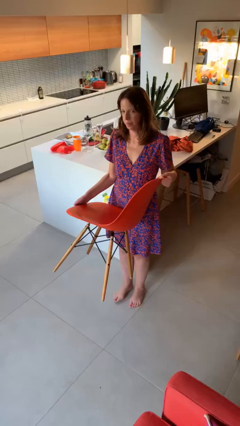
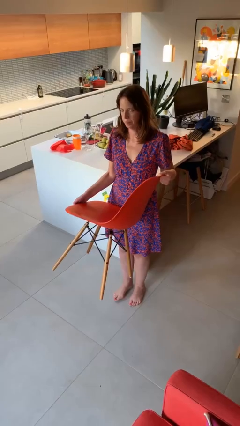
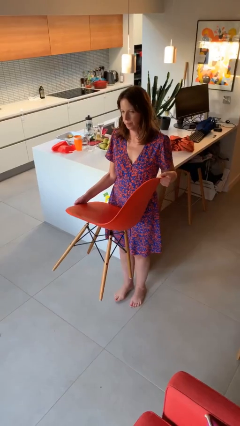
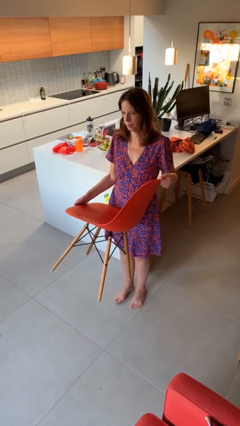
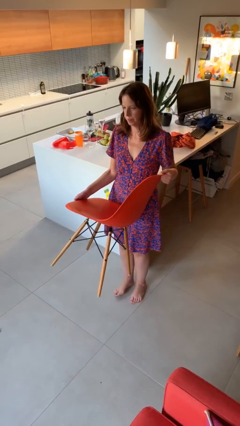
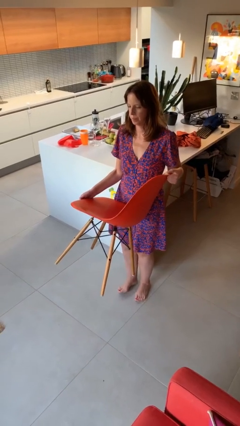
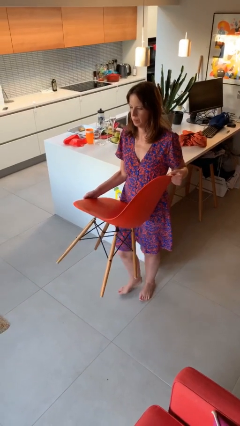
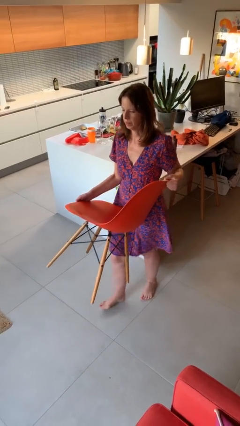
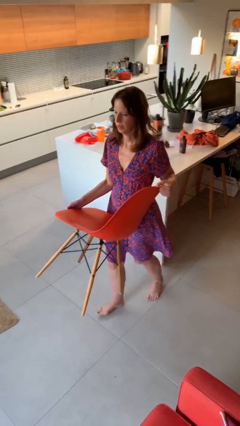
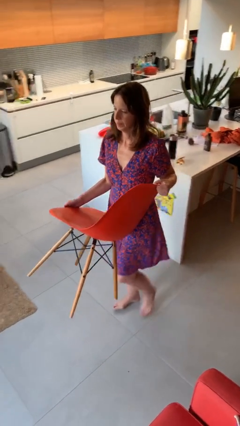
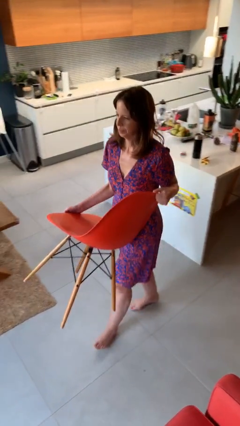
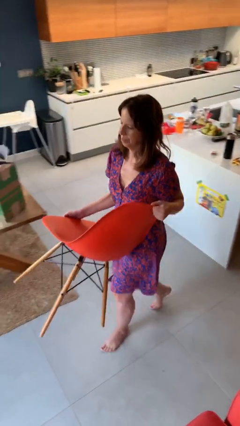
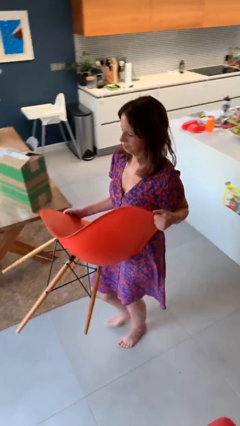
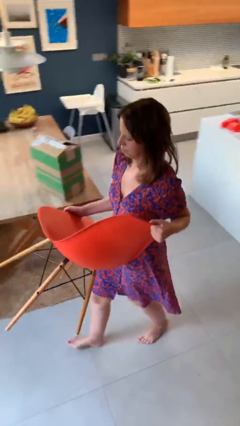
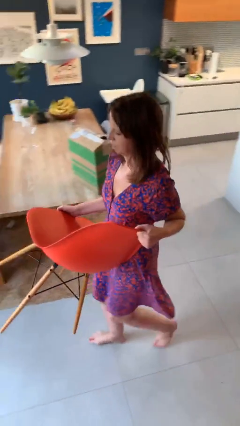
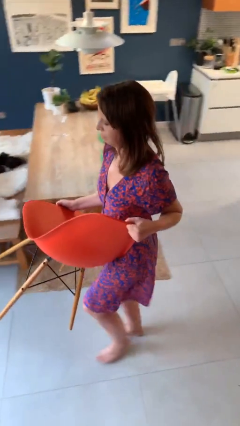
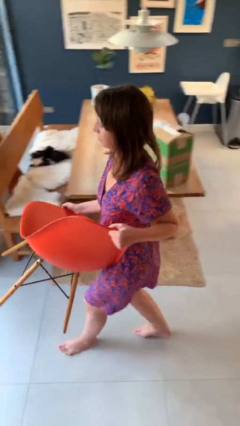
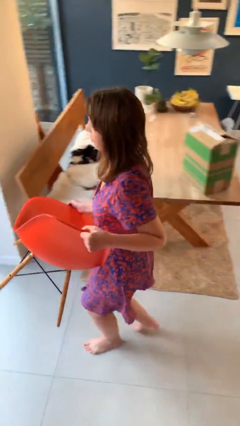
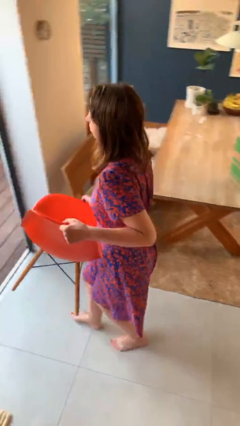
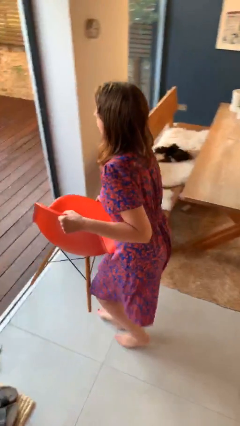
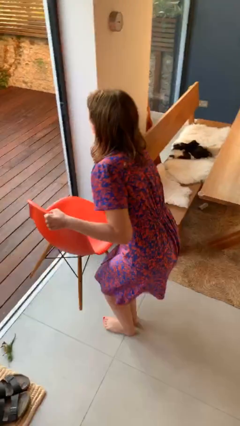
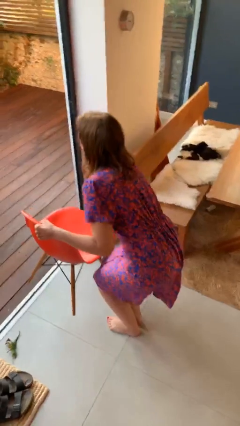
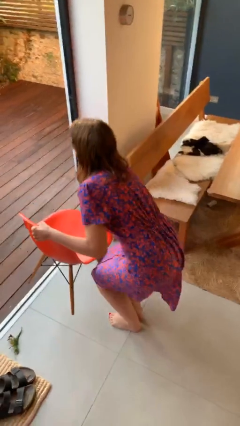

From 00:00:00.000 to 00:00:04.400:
person carries heavy object

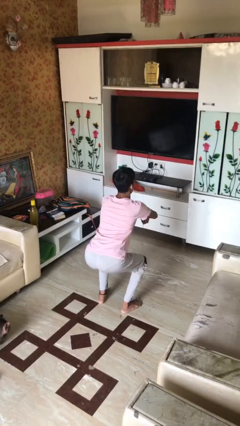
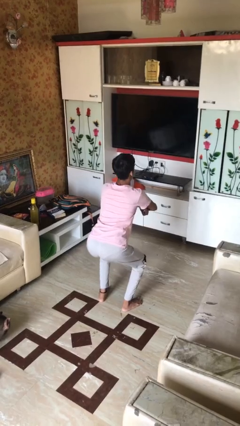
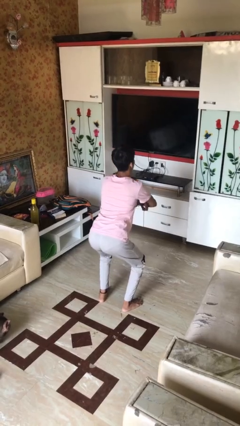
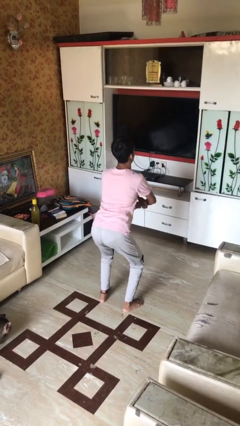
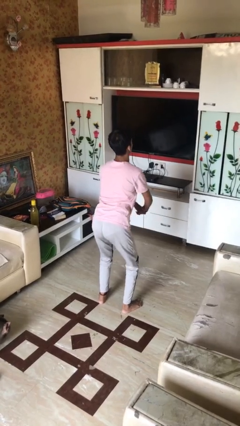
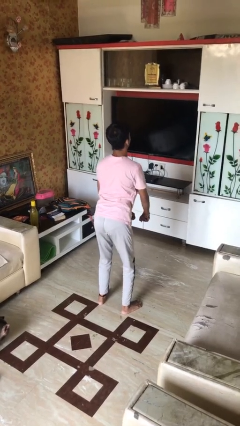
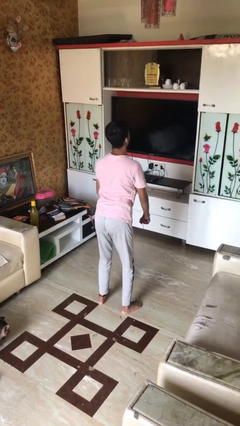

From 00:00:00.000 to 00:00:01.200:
person stands up

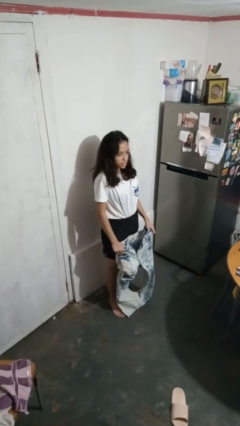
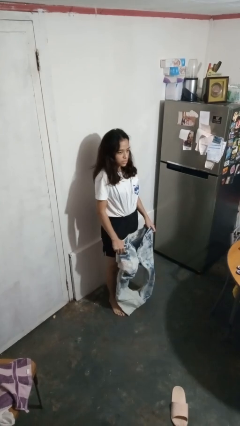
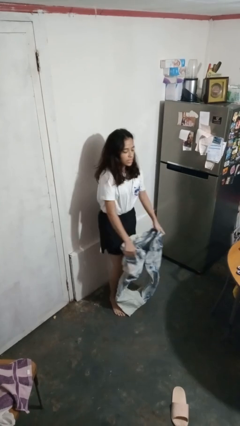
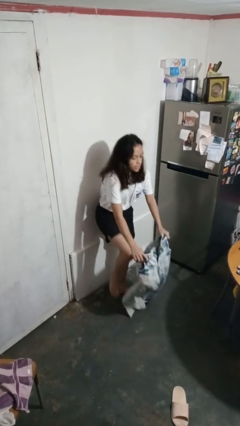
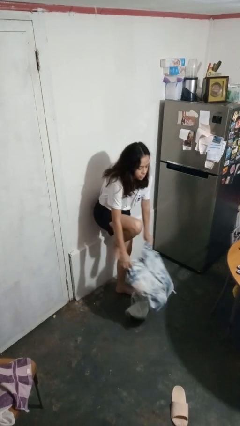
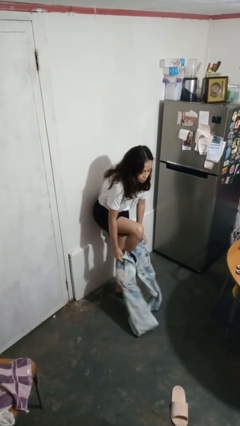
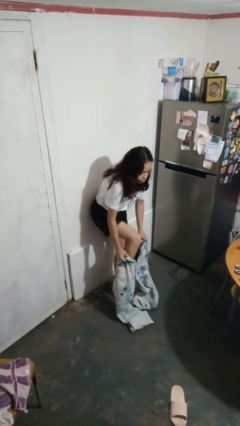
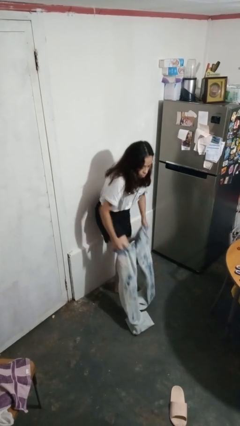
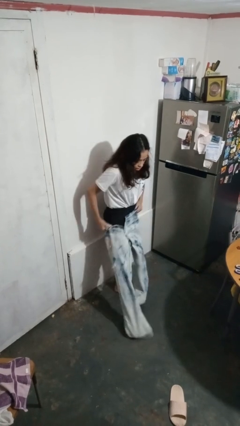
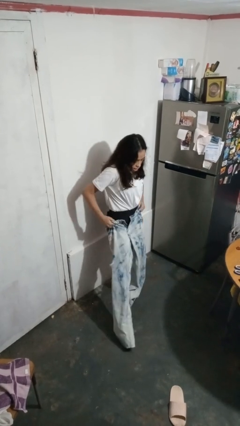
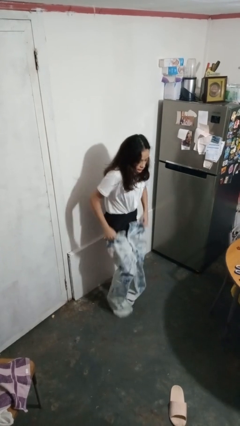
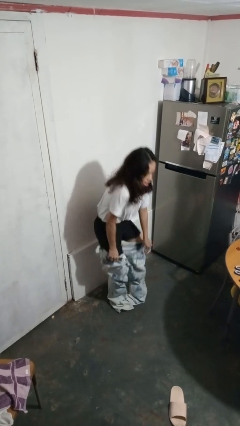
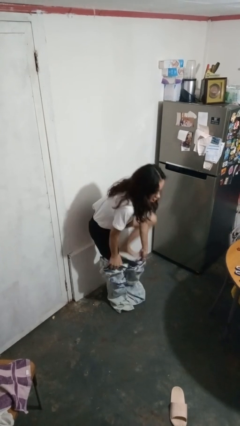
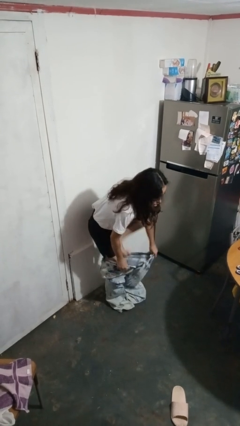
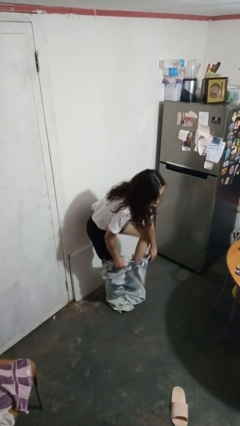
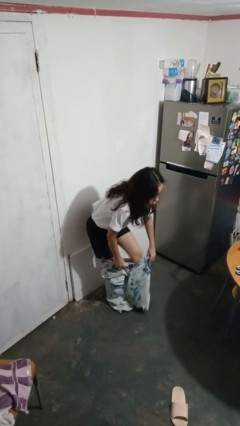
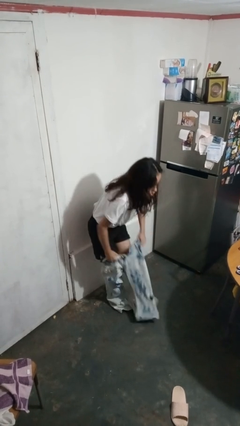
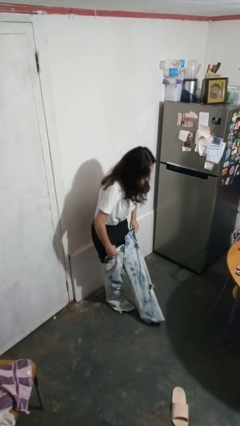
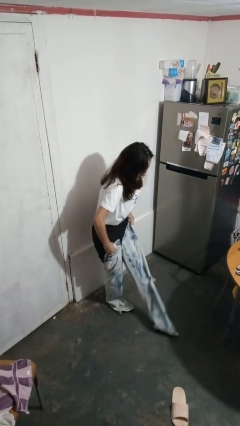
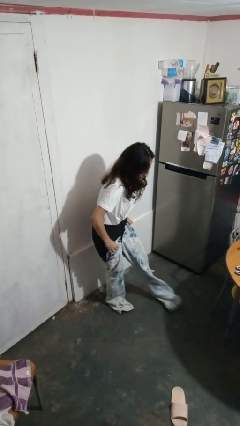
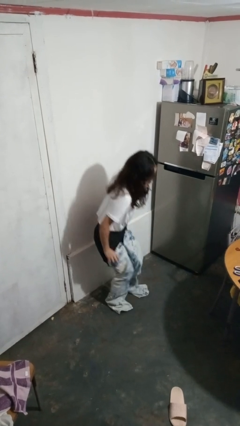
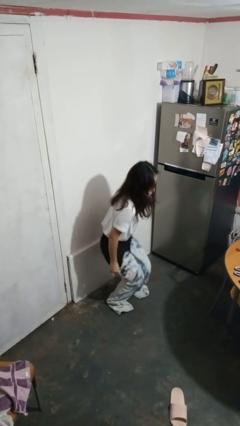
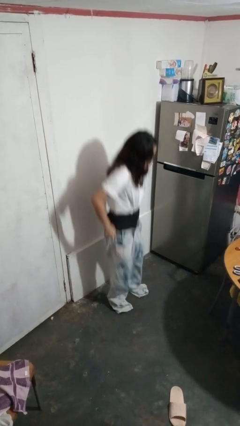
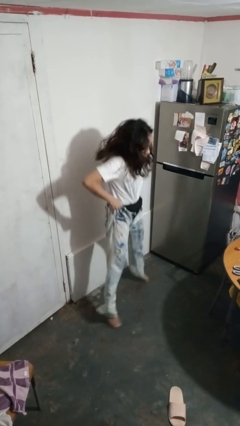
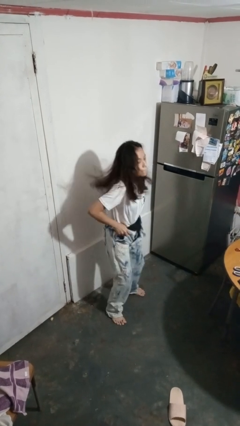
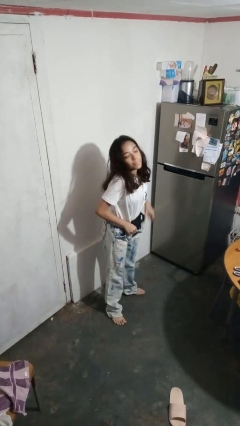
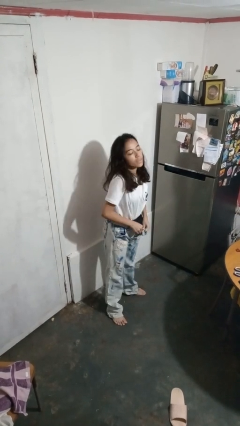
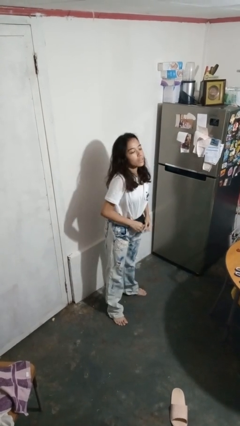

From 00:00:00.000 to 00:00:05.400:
person puts on pants

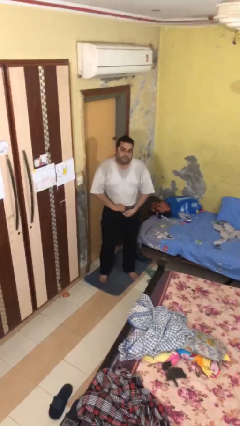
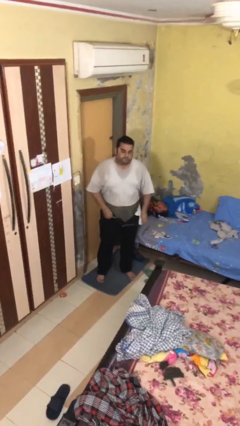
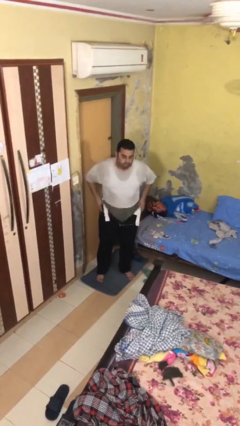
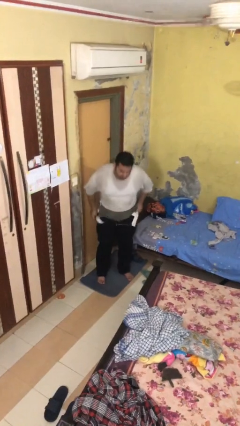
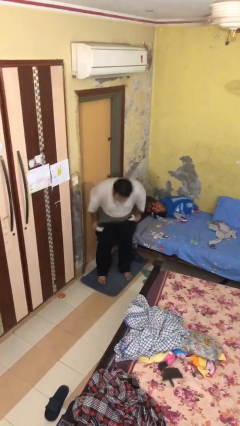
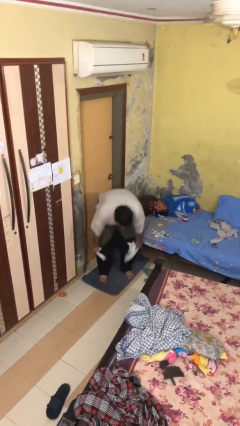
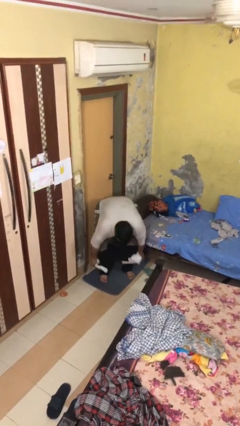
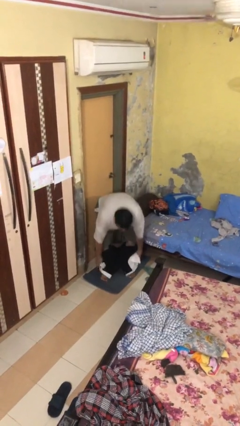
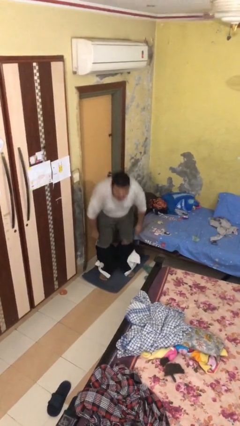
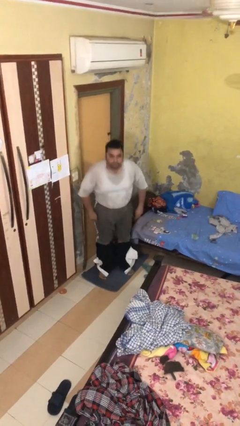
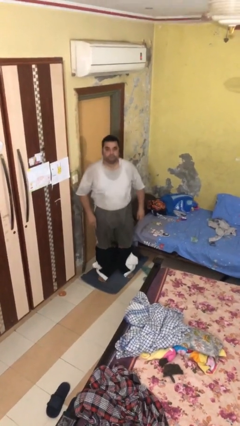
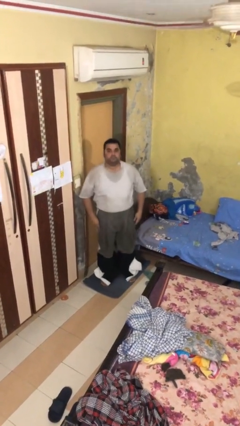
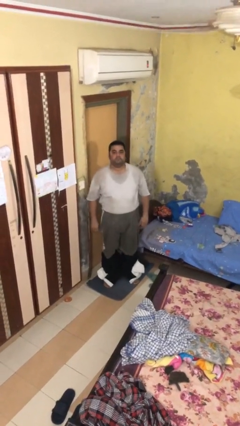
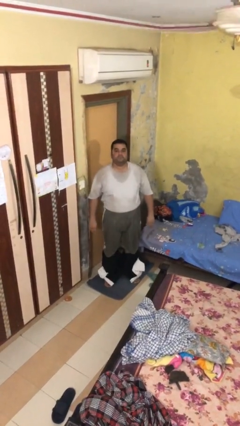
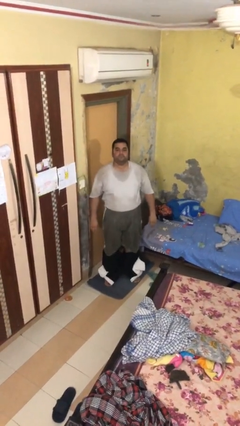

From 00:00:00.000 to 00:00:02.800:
person takes off pants

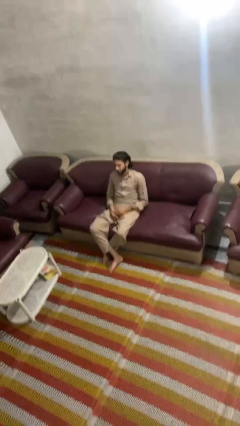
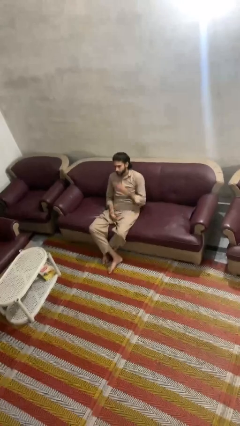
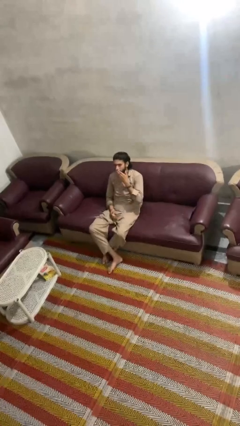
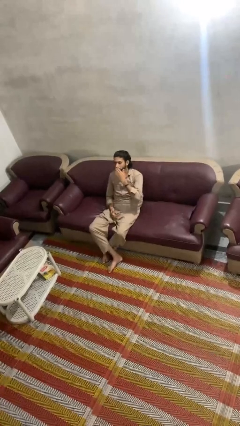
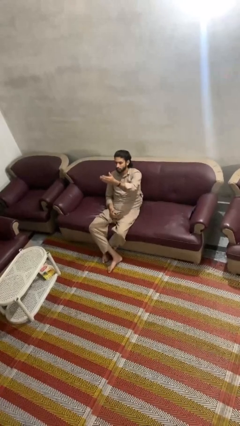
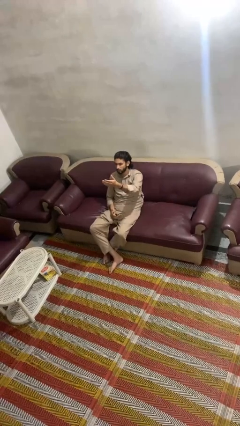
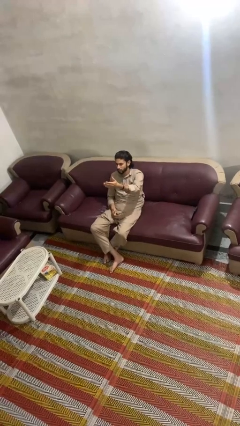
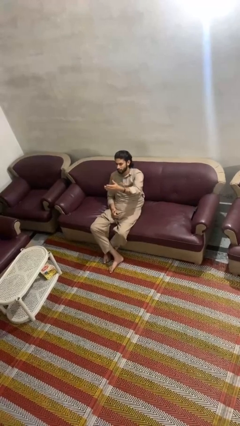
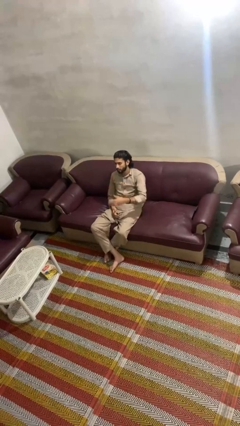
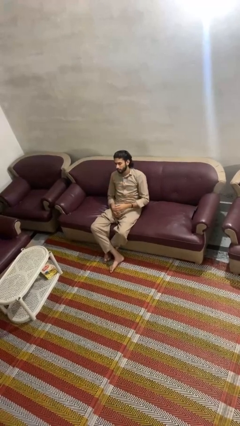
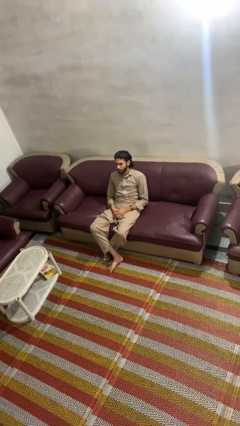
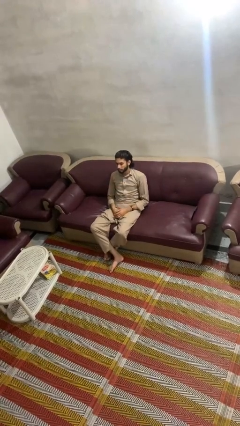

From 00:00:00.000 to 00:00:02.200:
person gestures blow kiss

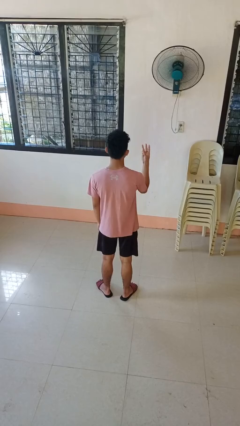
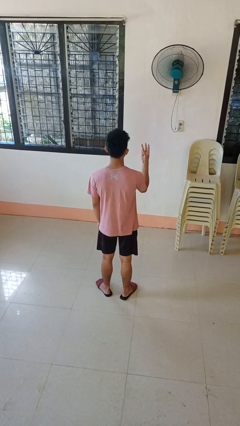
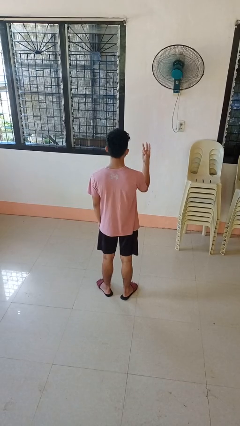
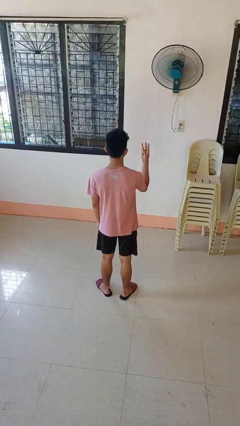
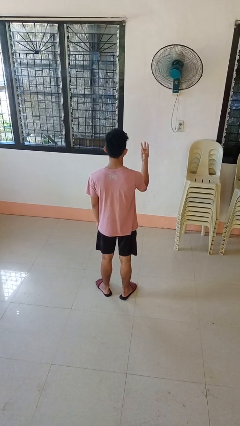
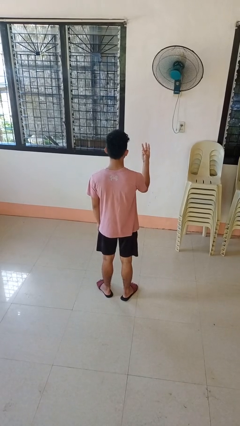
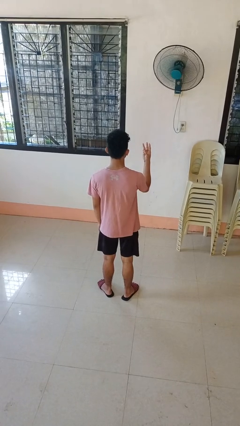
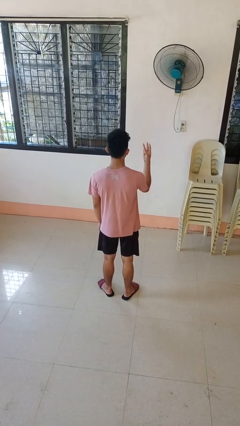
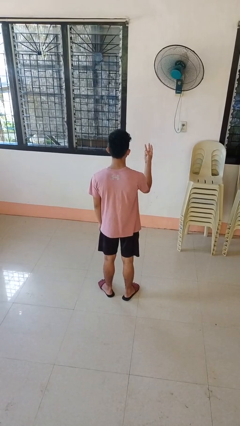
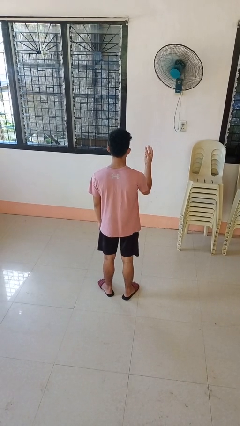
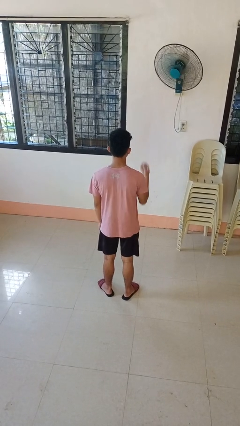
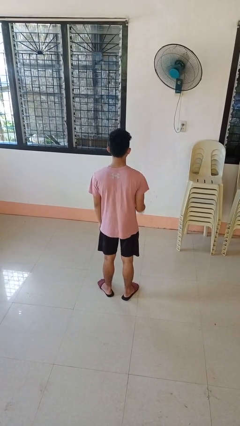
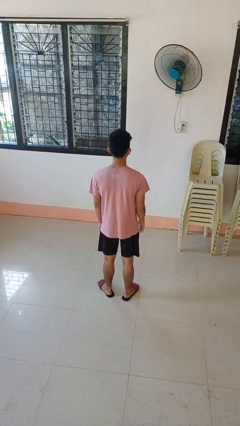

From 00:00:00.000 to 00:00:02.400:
person gestures number three
